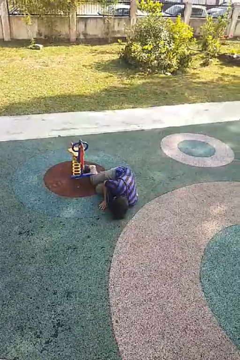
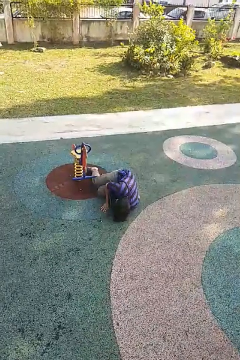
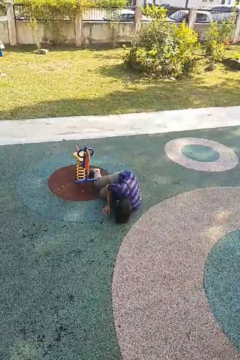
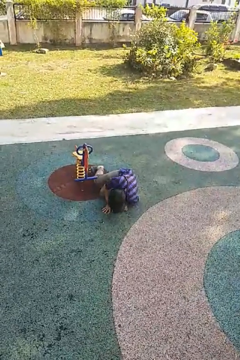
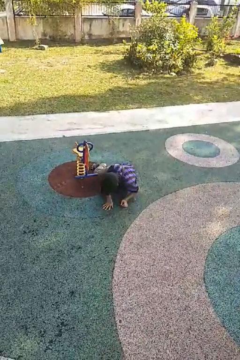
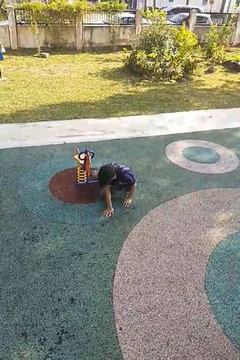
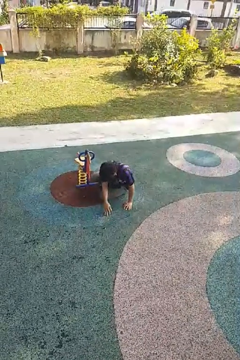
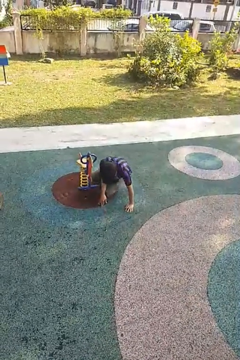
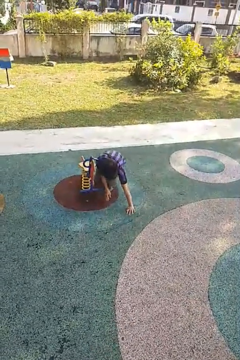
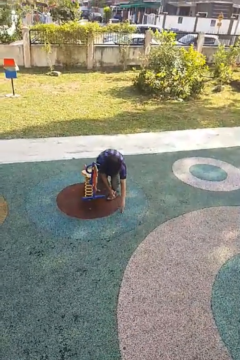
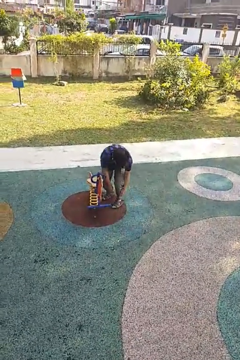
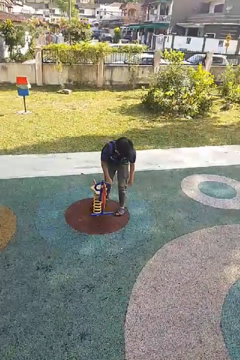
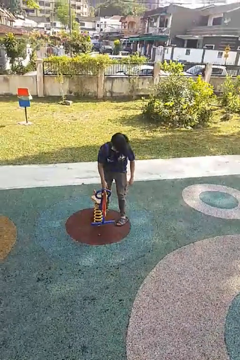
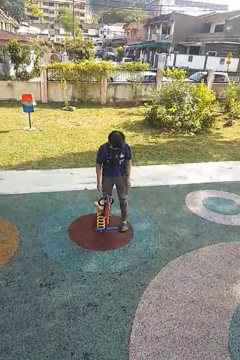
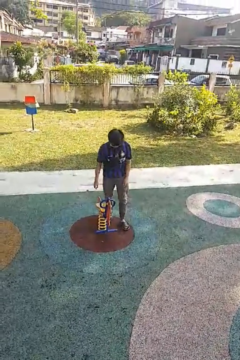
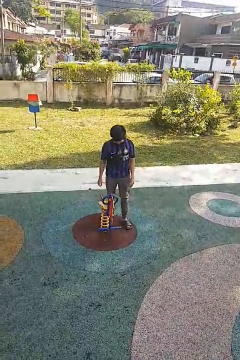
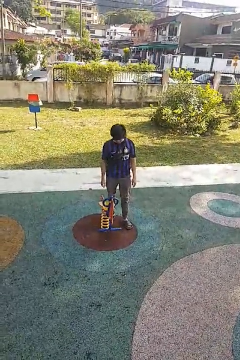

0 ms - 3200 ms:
person stands up from floor

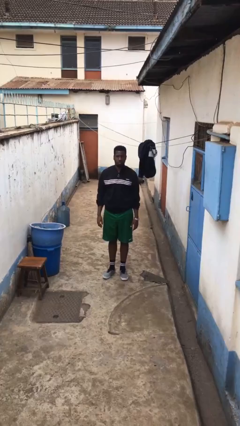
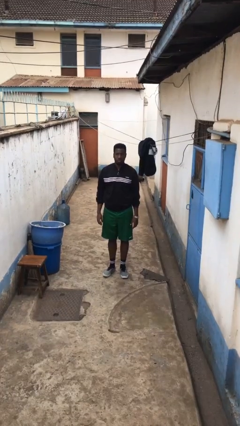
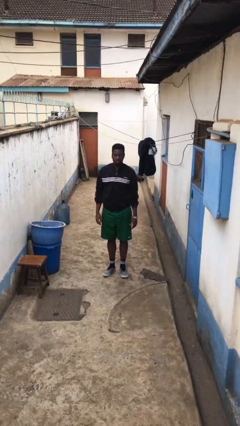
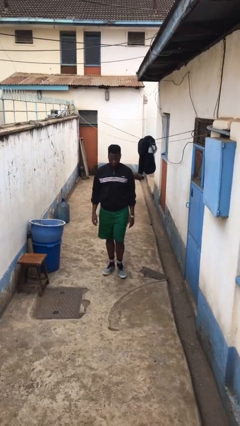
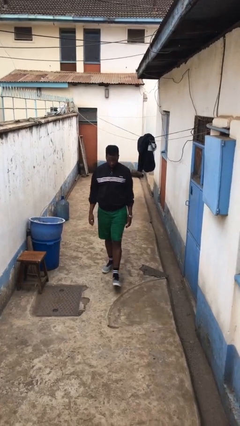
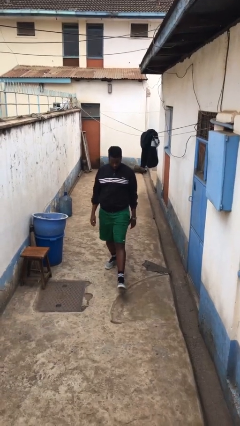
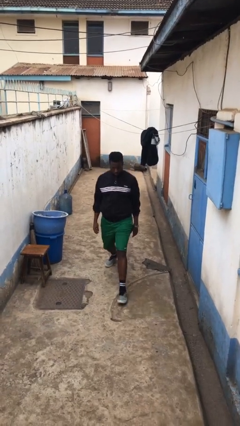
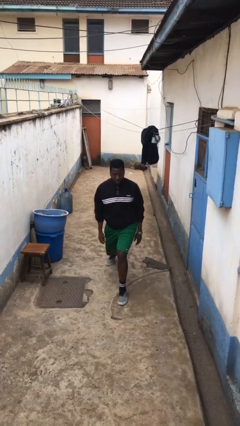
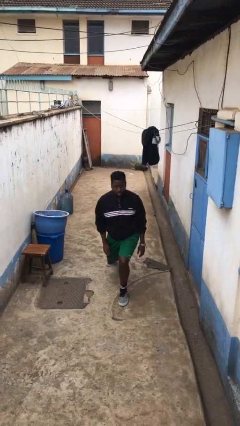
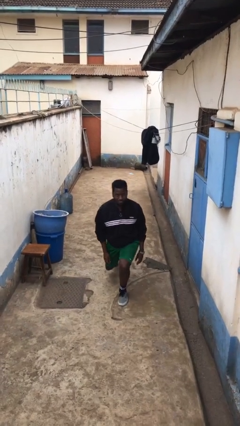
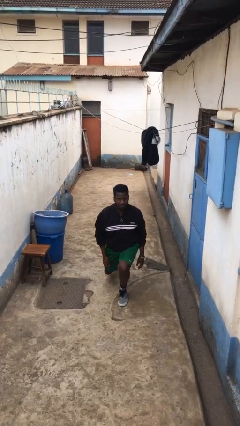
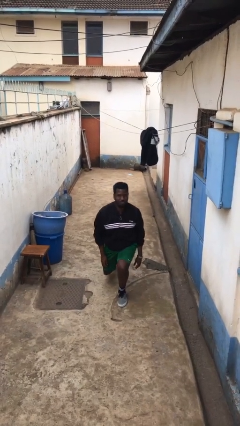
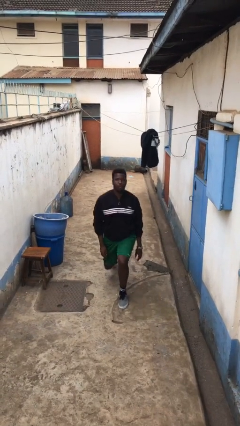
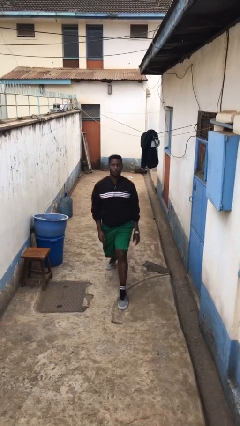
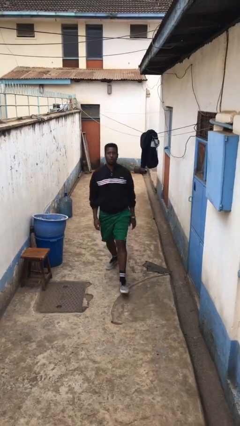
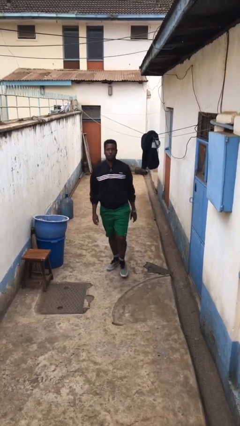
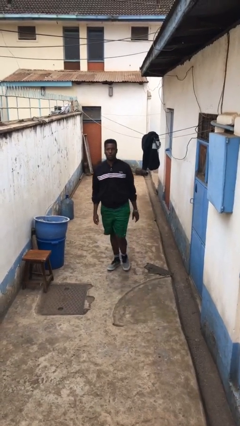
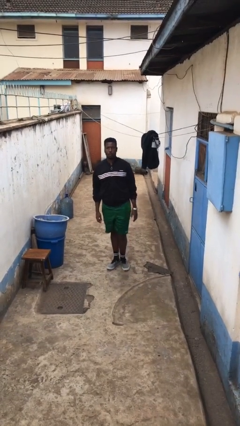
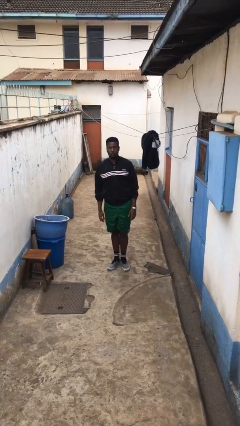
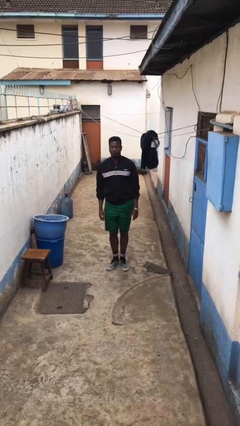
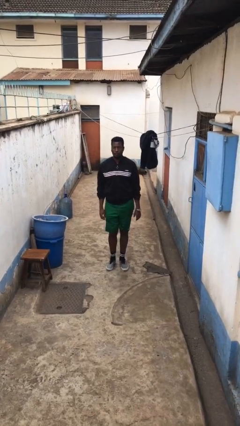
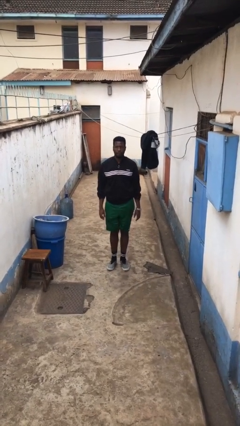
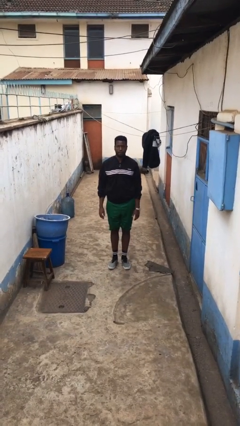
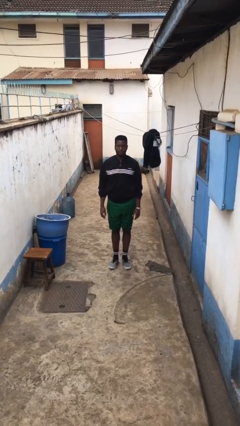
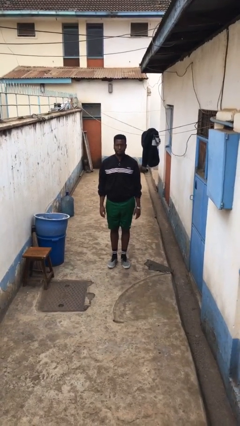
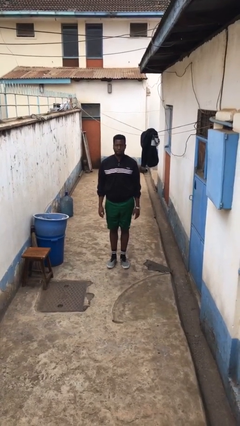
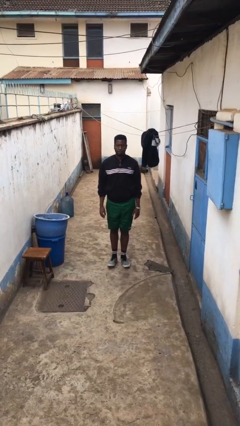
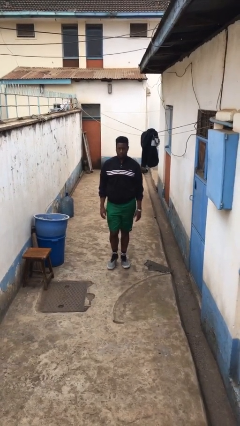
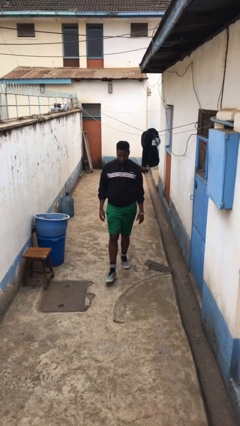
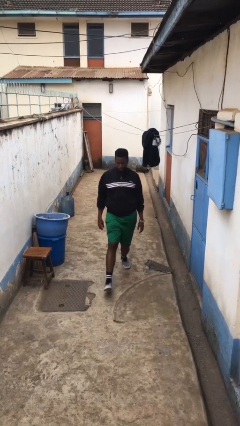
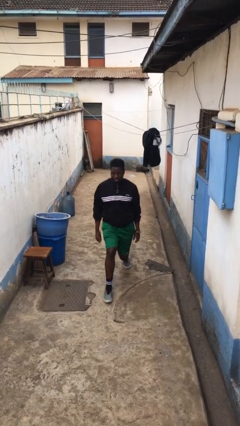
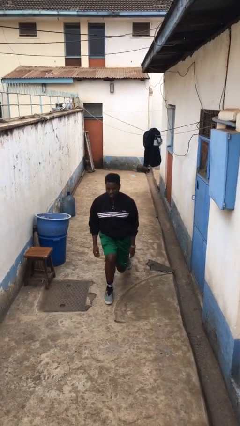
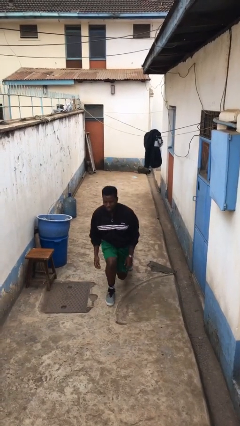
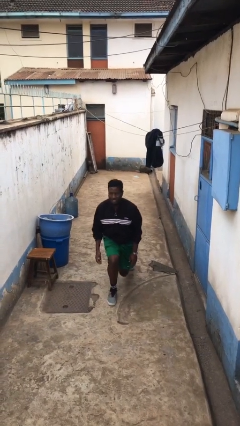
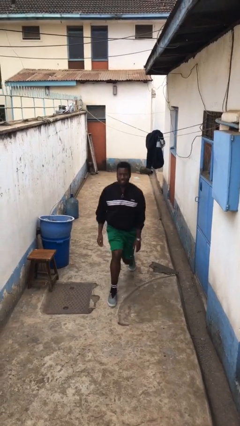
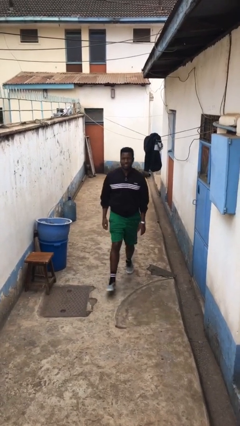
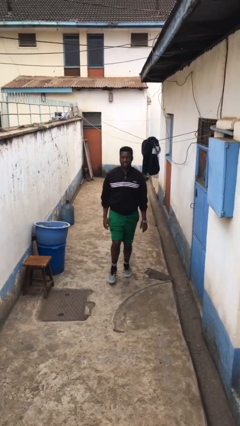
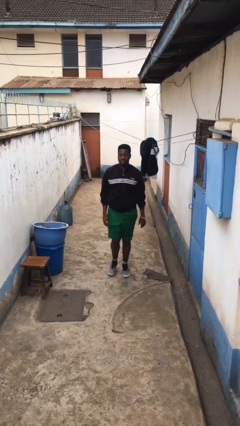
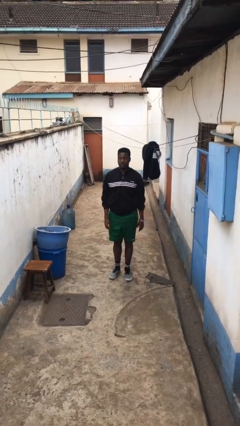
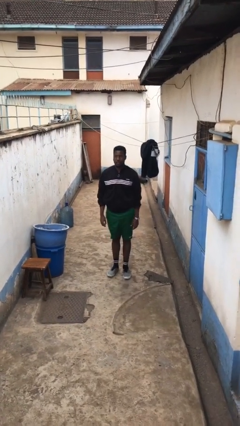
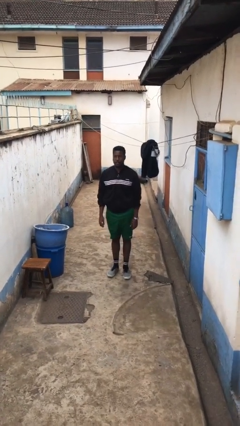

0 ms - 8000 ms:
person exercises with lunges

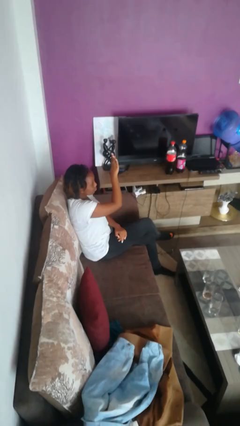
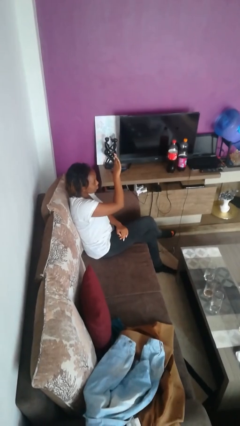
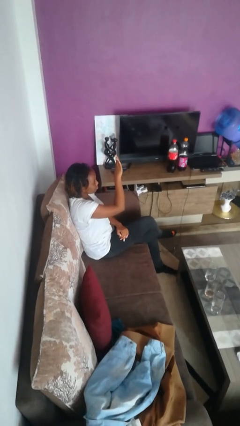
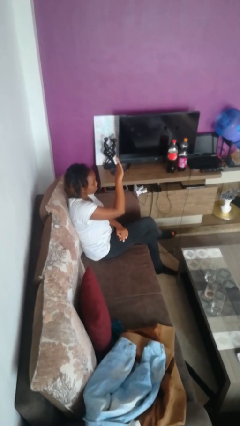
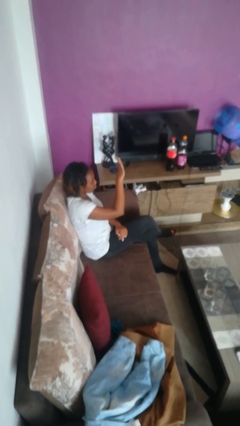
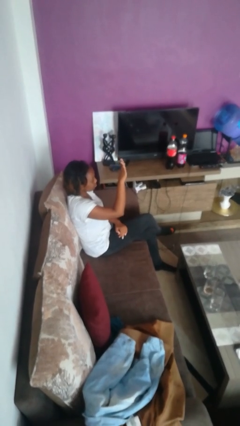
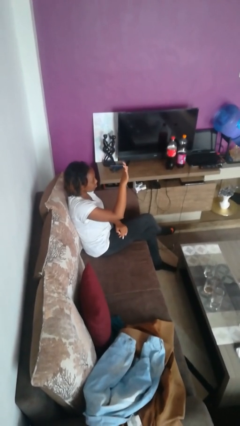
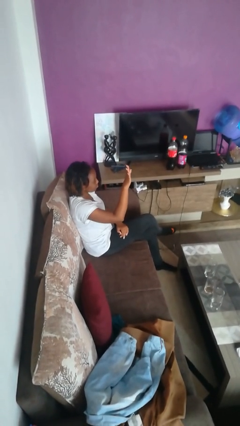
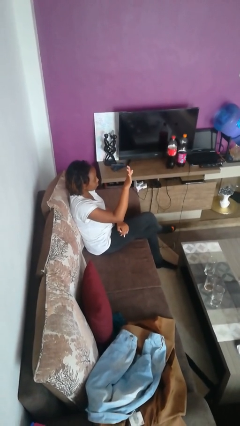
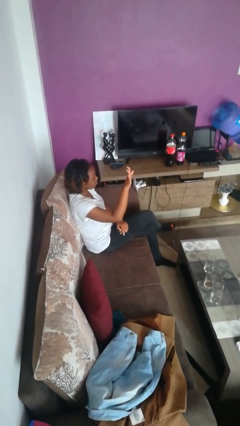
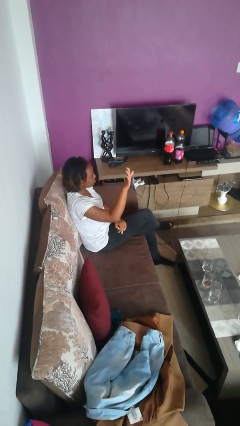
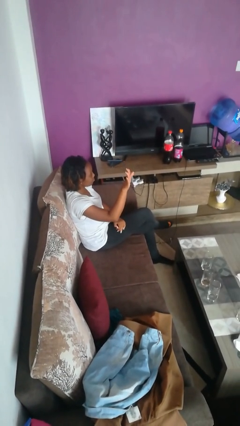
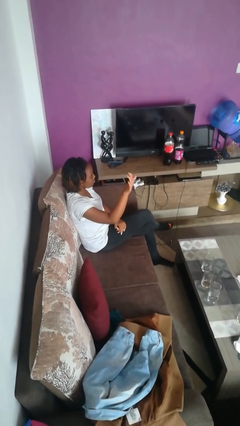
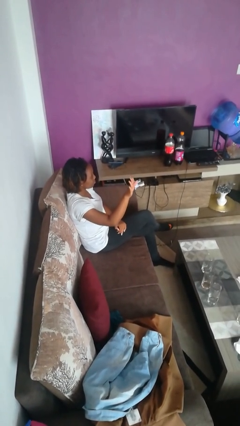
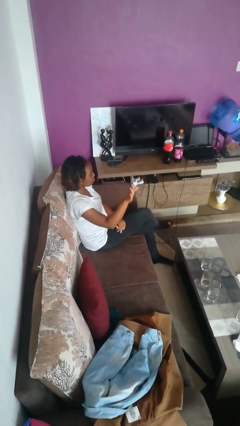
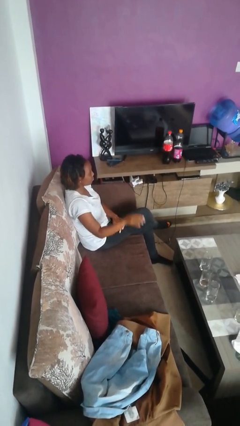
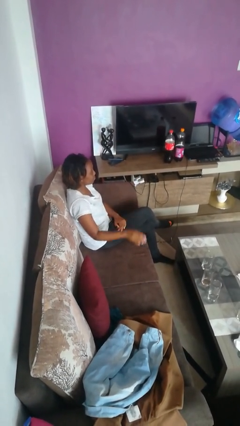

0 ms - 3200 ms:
person gestures swipe right

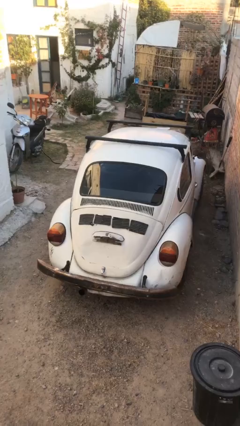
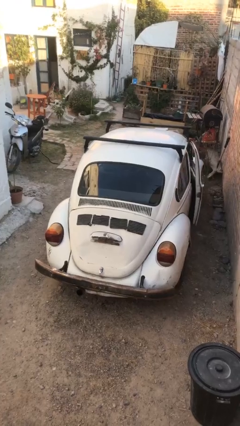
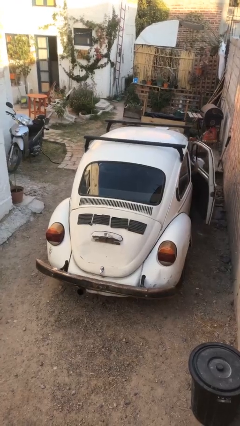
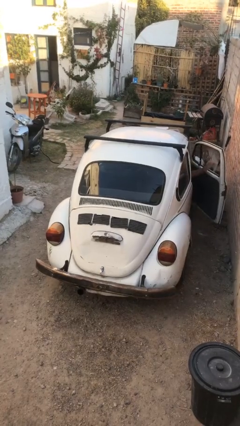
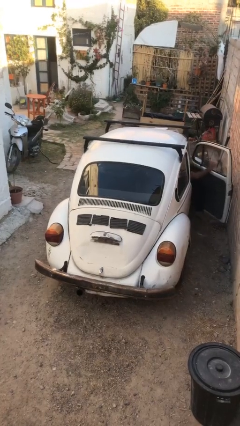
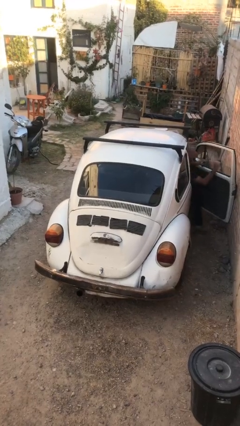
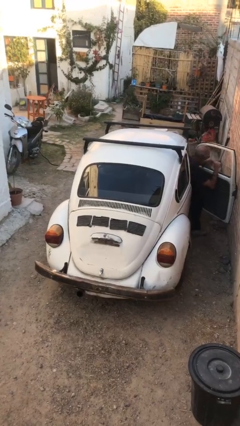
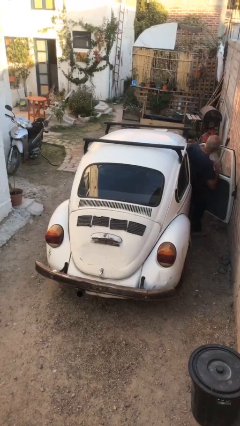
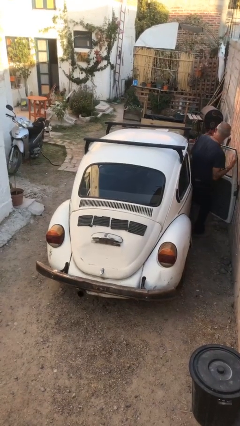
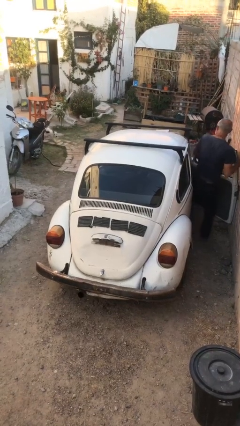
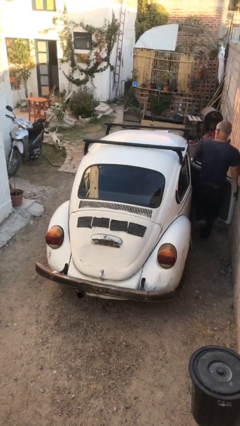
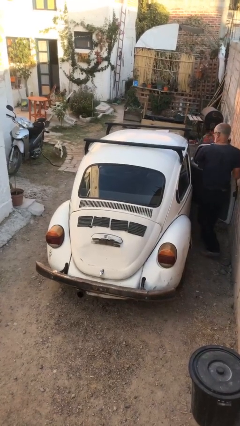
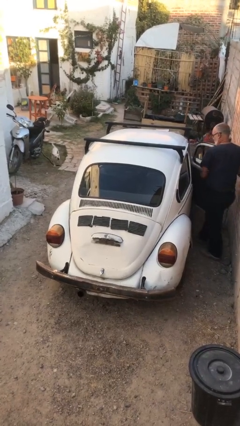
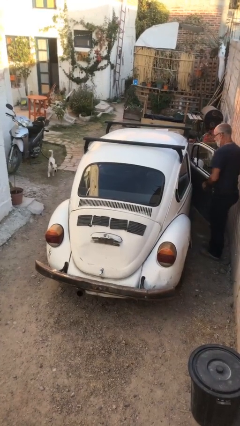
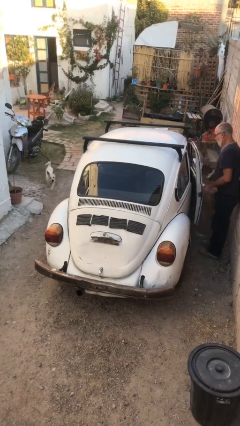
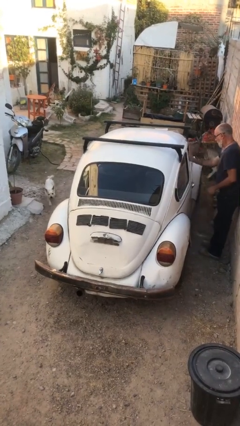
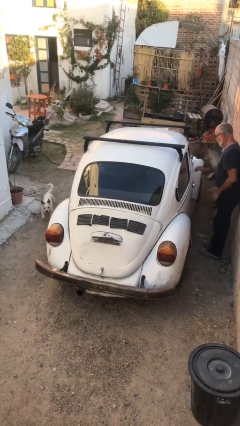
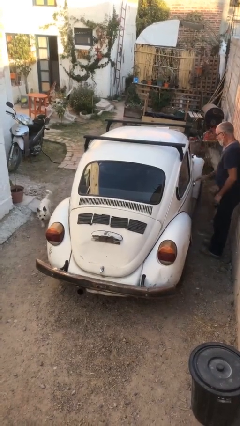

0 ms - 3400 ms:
car drops off person

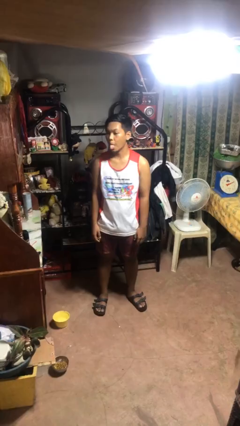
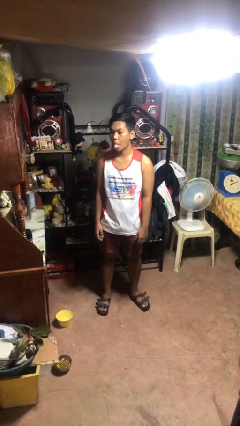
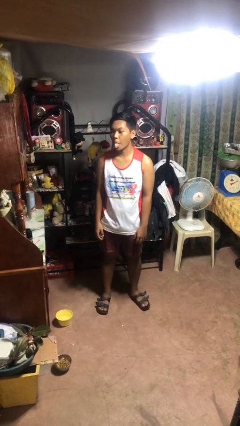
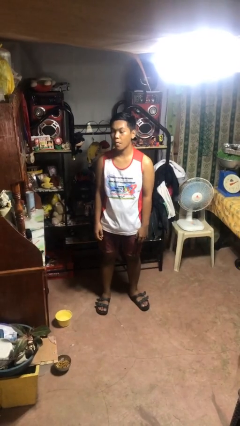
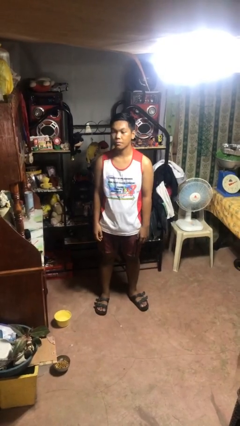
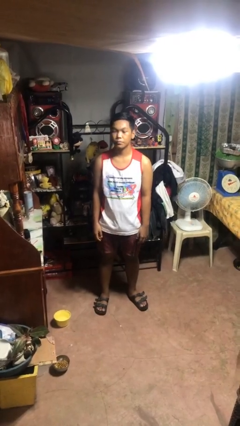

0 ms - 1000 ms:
person sticks out tongue
